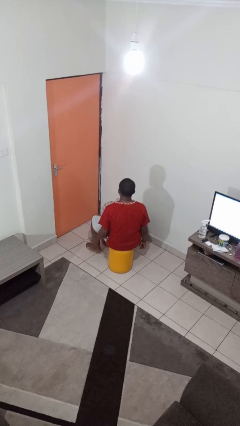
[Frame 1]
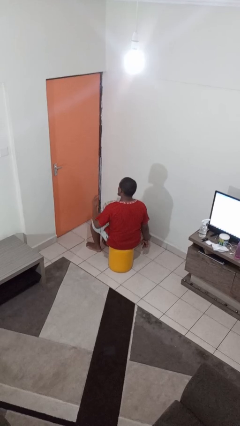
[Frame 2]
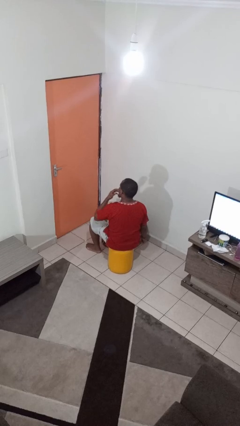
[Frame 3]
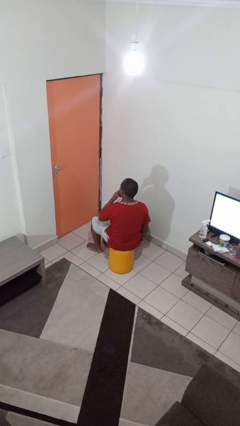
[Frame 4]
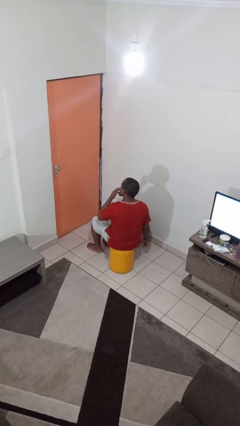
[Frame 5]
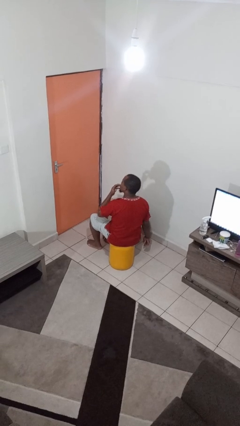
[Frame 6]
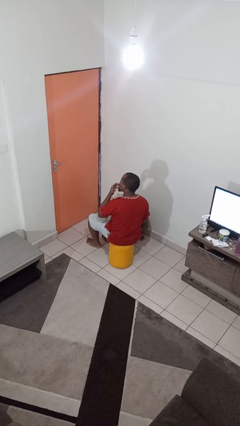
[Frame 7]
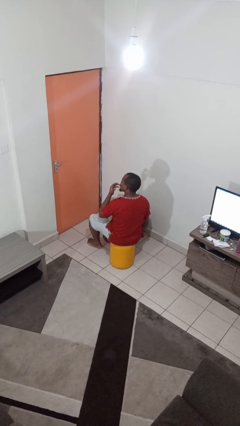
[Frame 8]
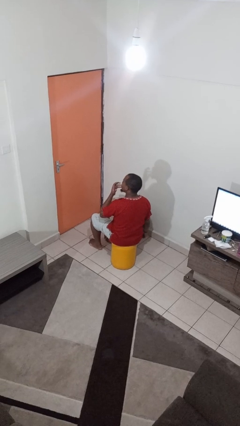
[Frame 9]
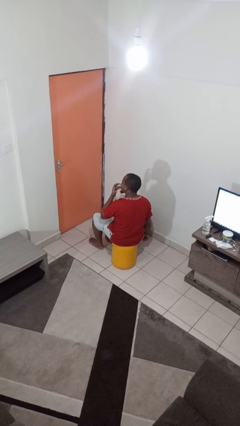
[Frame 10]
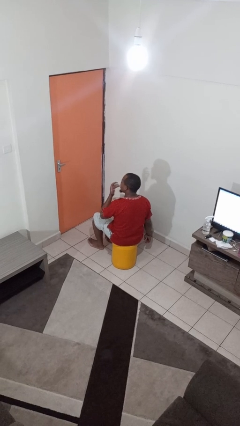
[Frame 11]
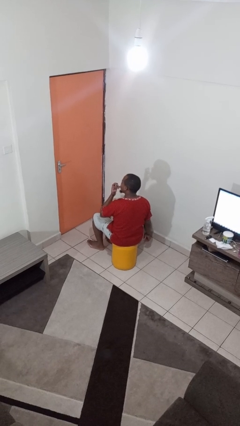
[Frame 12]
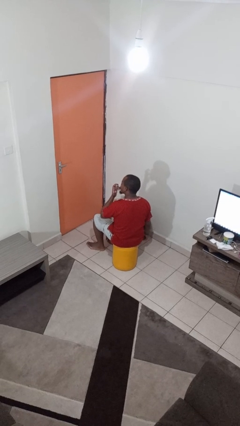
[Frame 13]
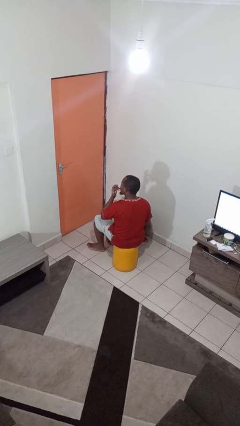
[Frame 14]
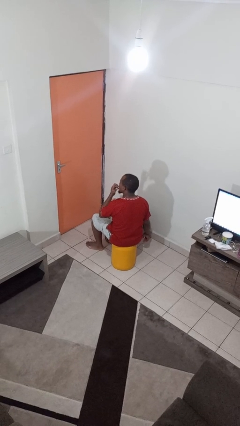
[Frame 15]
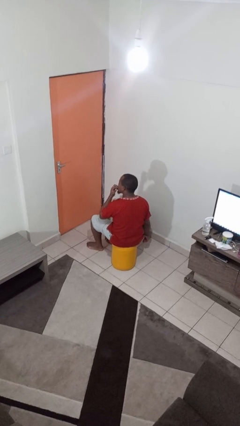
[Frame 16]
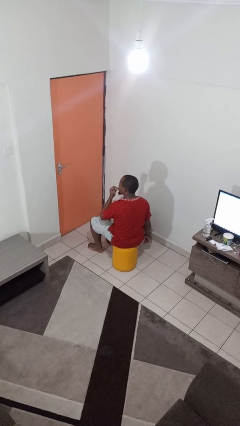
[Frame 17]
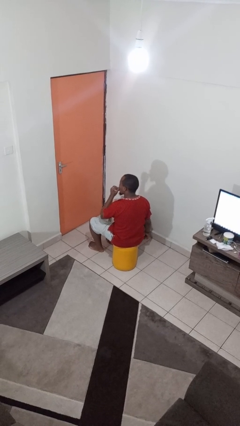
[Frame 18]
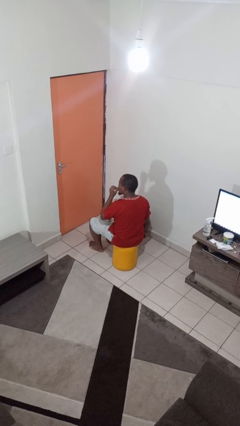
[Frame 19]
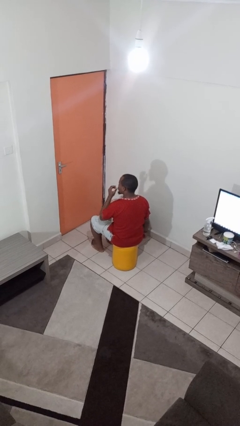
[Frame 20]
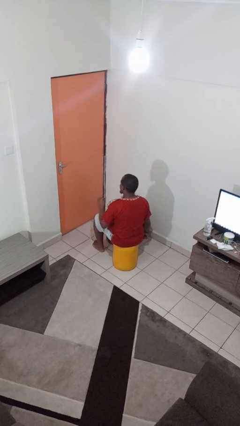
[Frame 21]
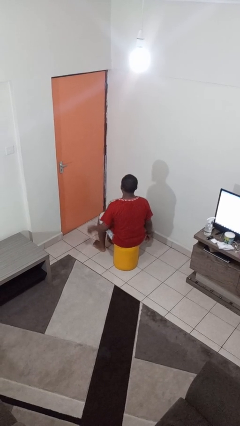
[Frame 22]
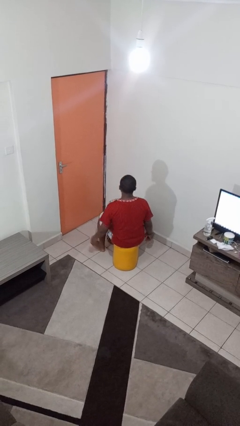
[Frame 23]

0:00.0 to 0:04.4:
person licks fingers

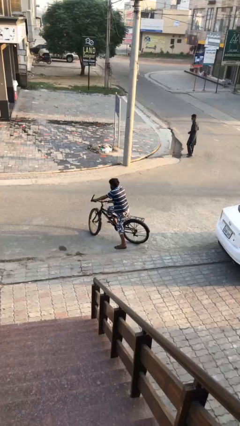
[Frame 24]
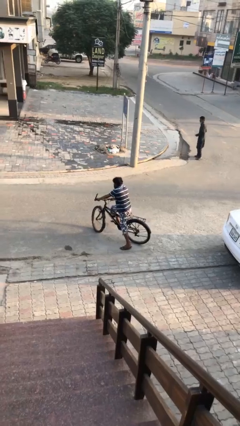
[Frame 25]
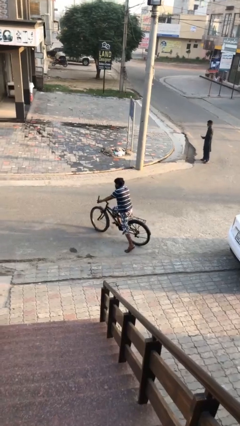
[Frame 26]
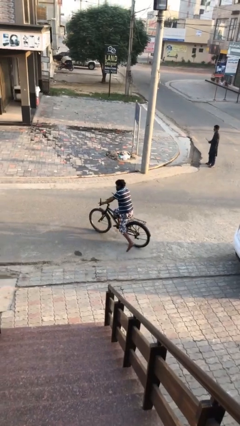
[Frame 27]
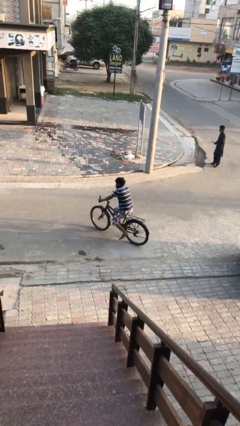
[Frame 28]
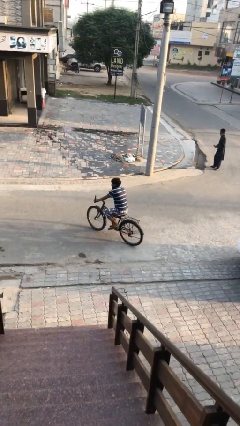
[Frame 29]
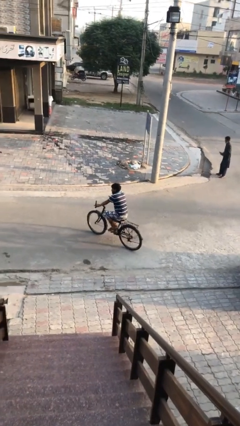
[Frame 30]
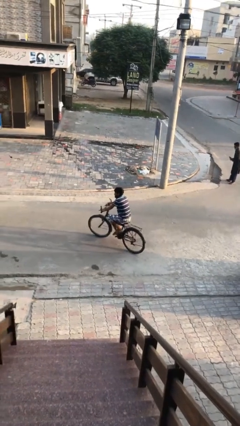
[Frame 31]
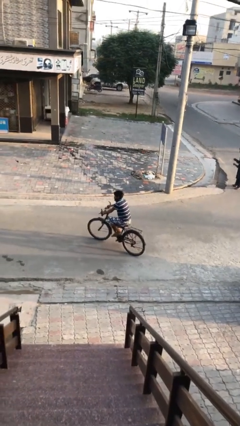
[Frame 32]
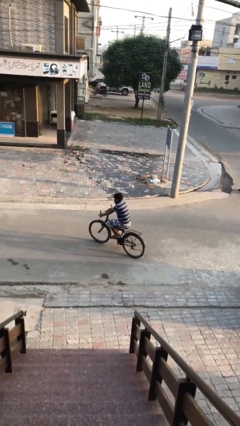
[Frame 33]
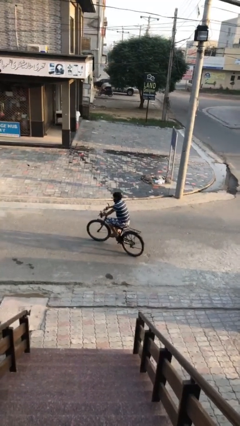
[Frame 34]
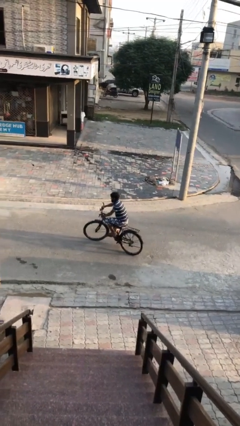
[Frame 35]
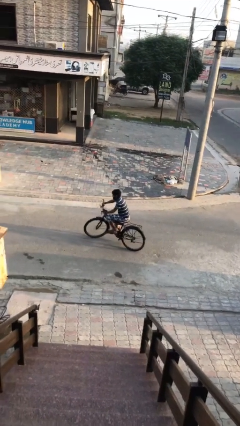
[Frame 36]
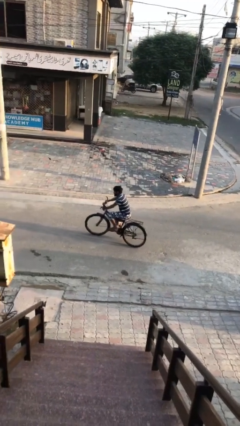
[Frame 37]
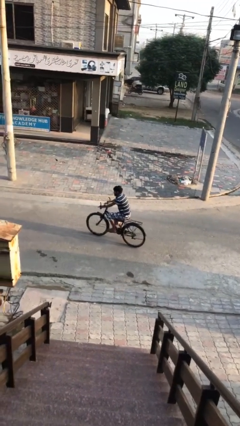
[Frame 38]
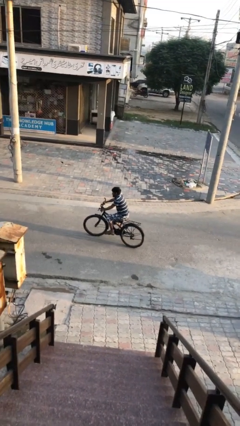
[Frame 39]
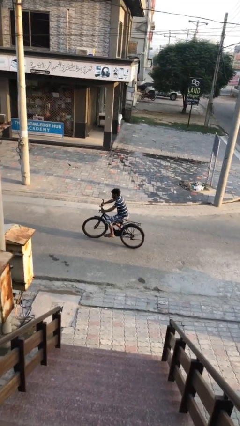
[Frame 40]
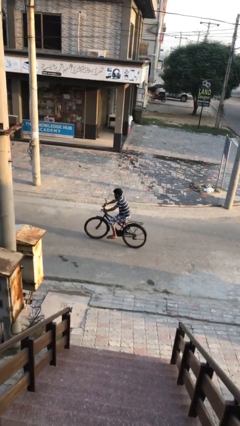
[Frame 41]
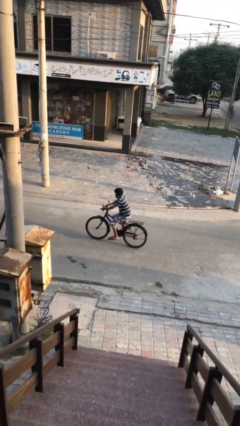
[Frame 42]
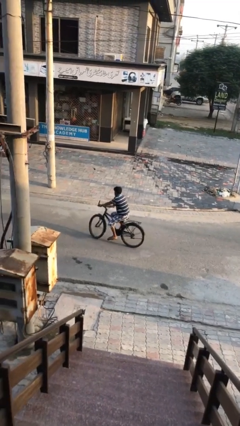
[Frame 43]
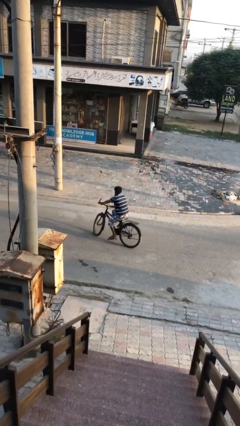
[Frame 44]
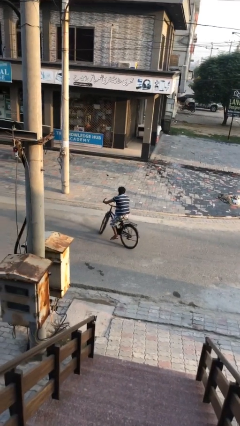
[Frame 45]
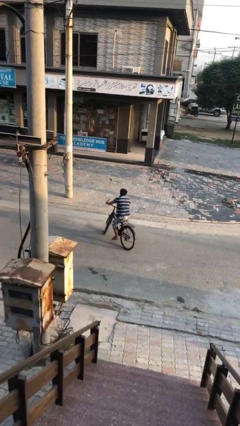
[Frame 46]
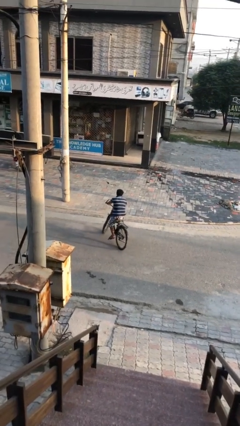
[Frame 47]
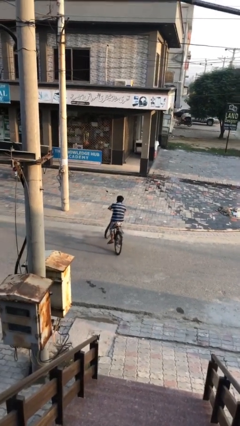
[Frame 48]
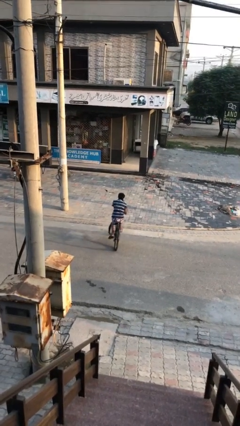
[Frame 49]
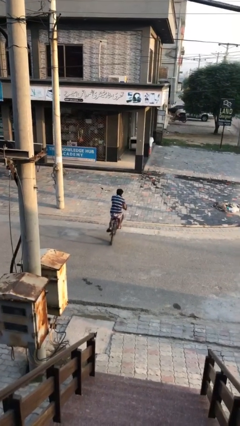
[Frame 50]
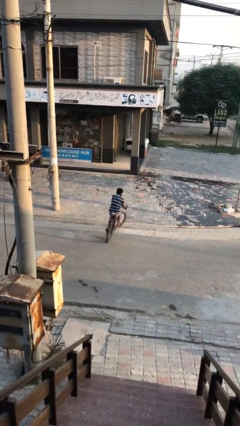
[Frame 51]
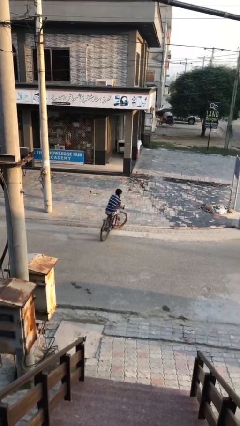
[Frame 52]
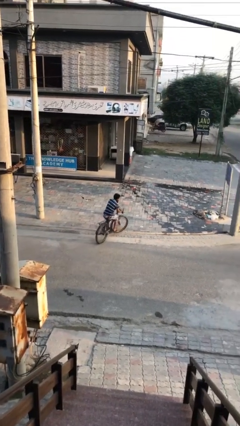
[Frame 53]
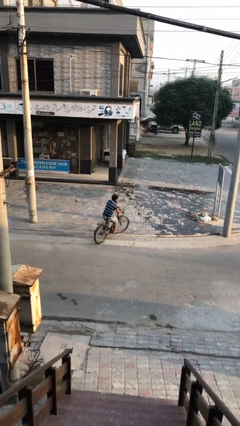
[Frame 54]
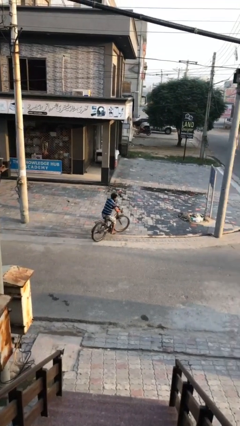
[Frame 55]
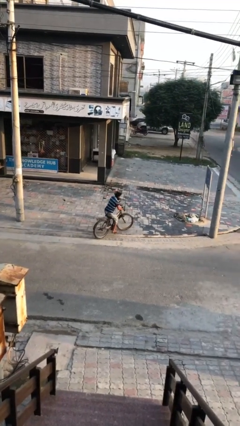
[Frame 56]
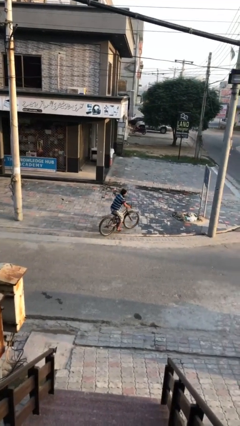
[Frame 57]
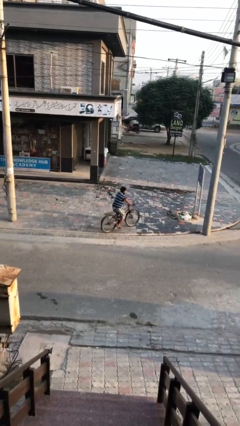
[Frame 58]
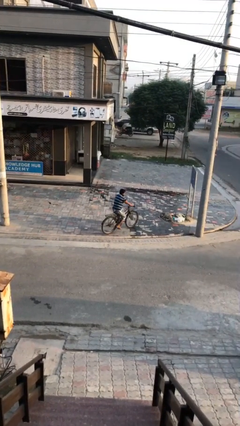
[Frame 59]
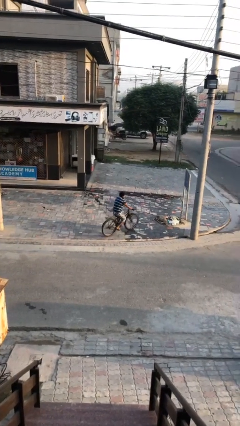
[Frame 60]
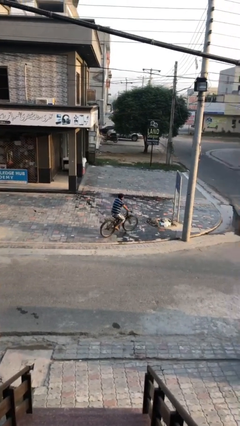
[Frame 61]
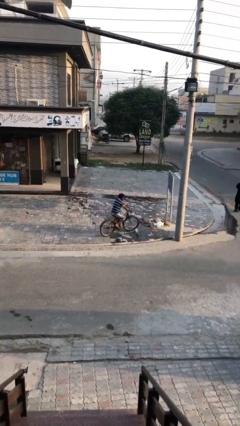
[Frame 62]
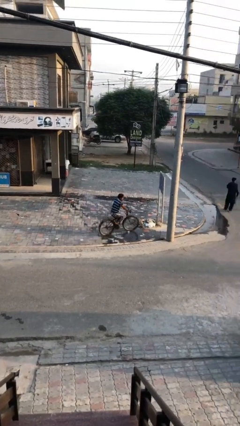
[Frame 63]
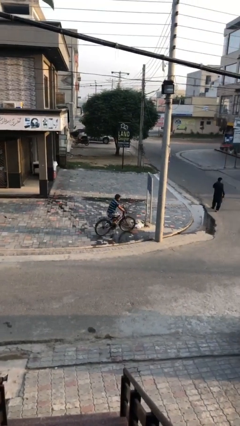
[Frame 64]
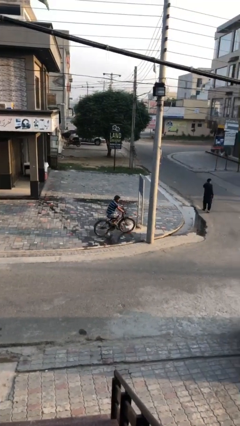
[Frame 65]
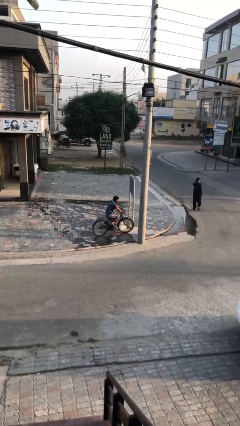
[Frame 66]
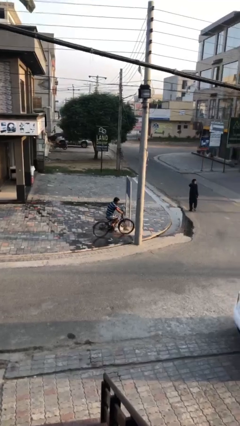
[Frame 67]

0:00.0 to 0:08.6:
person rides bicycle

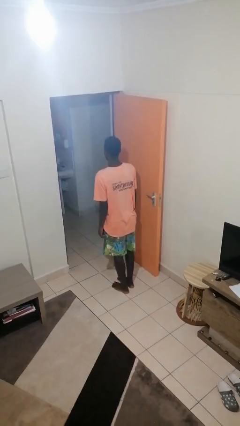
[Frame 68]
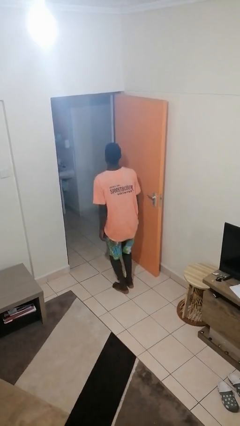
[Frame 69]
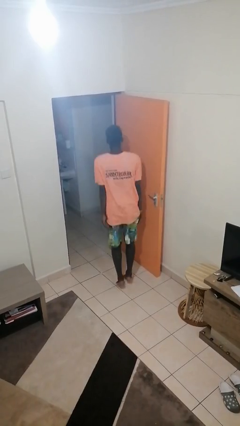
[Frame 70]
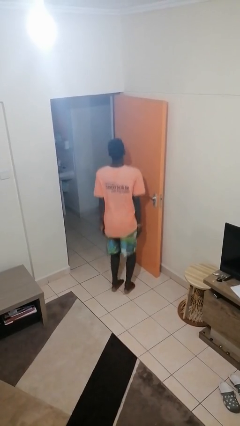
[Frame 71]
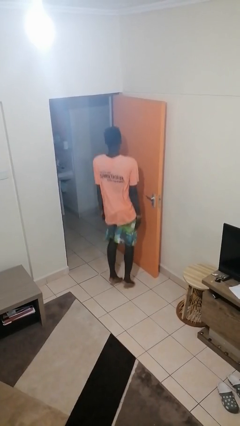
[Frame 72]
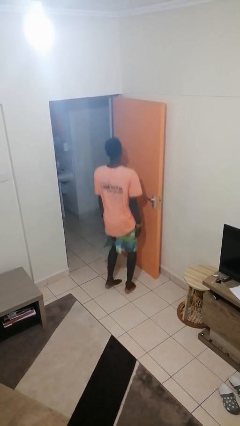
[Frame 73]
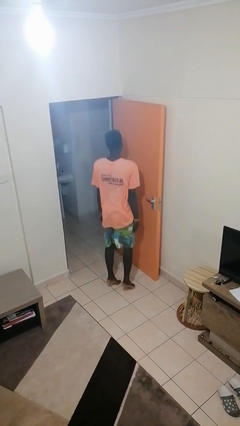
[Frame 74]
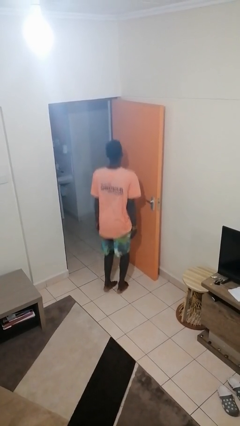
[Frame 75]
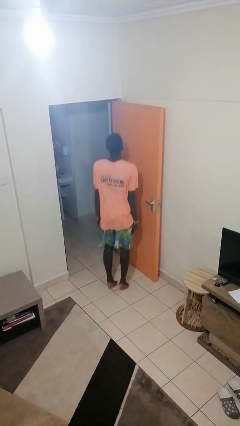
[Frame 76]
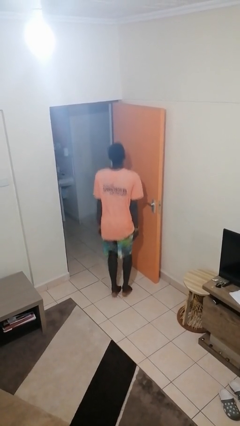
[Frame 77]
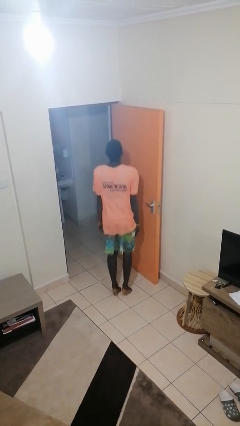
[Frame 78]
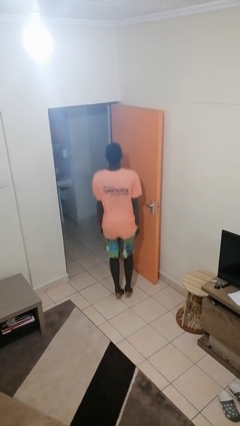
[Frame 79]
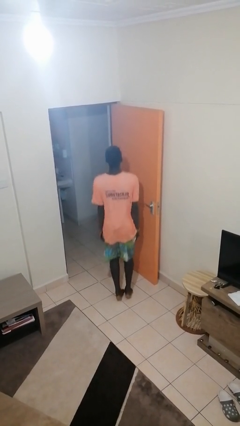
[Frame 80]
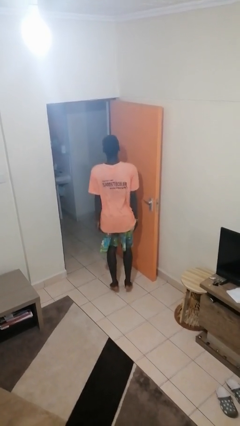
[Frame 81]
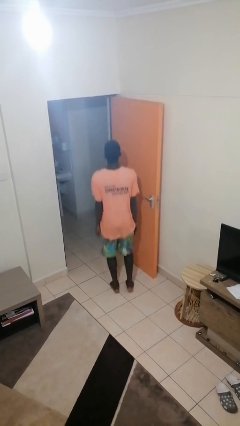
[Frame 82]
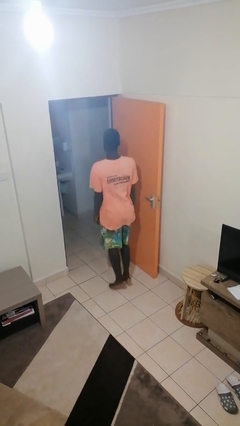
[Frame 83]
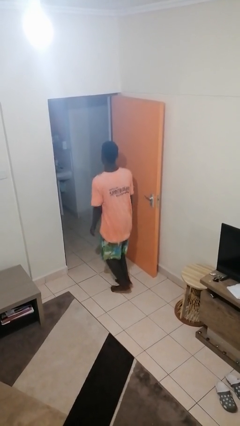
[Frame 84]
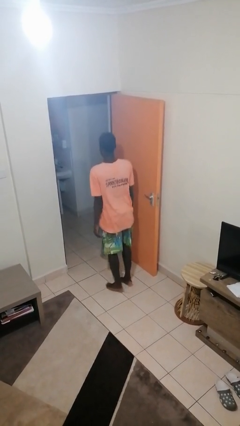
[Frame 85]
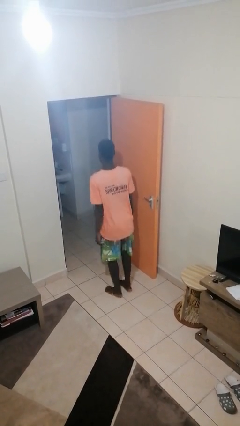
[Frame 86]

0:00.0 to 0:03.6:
person jumps

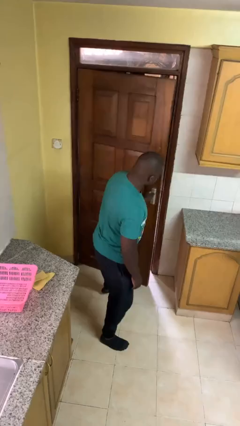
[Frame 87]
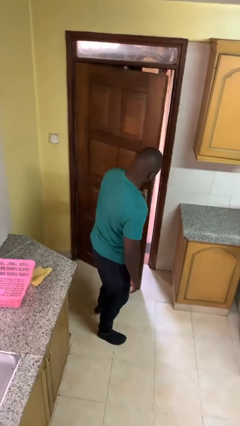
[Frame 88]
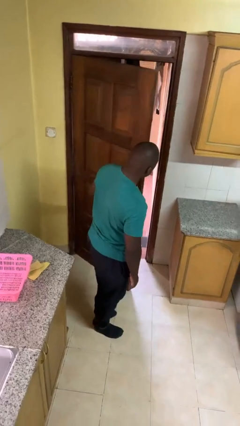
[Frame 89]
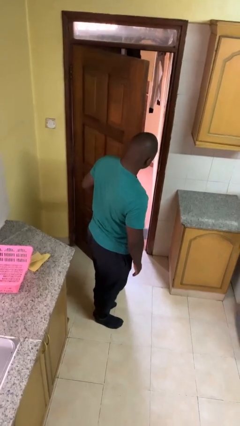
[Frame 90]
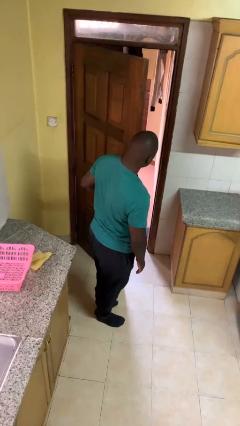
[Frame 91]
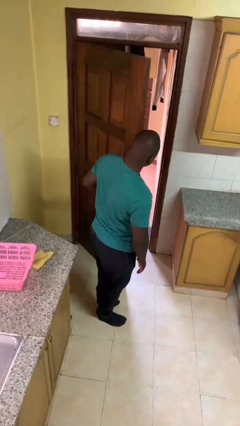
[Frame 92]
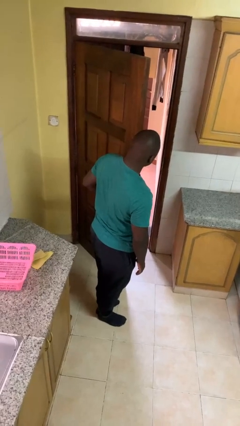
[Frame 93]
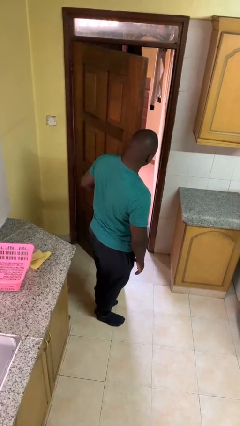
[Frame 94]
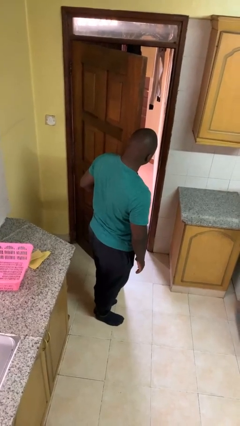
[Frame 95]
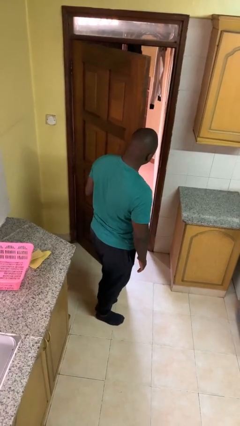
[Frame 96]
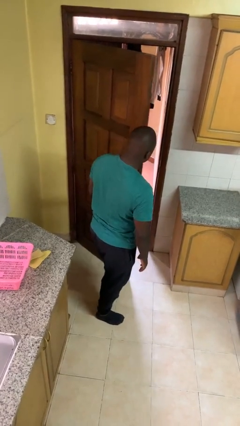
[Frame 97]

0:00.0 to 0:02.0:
person opens facility door
